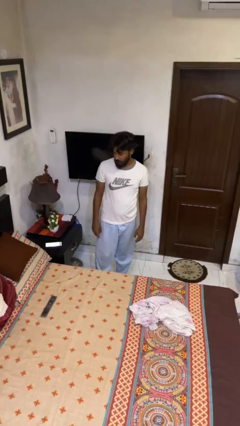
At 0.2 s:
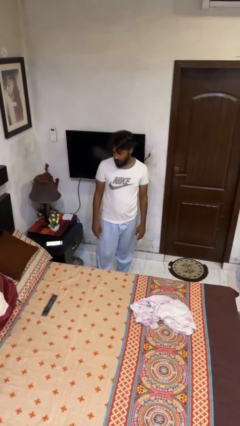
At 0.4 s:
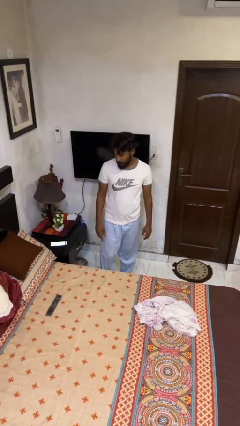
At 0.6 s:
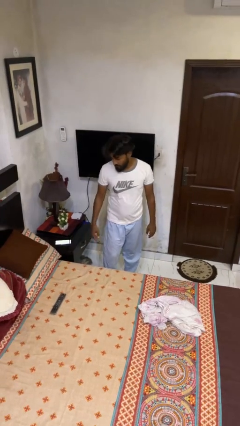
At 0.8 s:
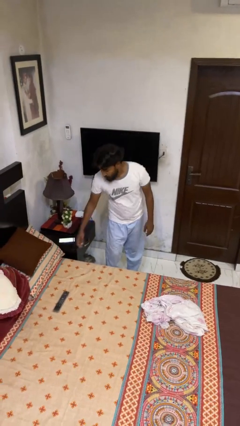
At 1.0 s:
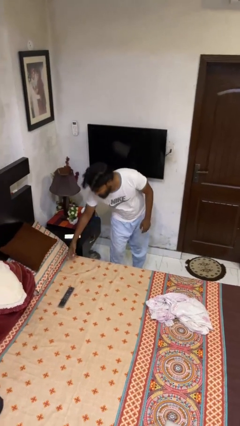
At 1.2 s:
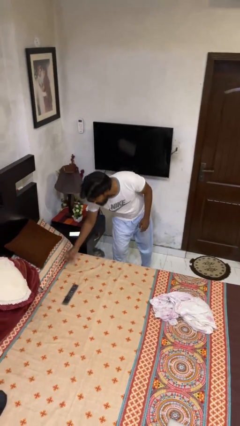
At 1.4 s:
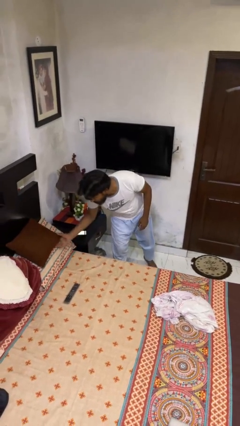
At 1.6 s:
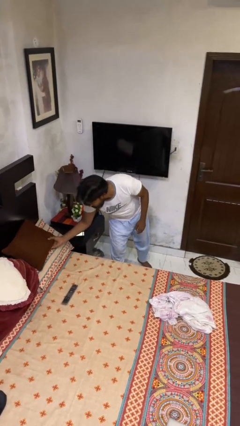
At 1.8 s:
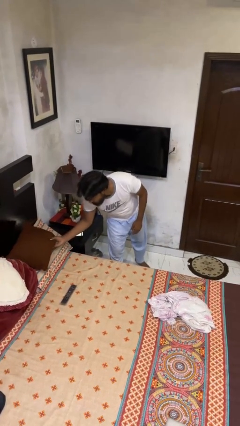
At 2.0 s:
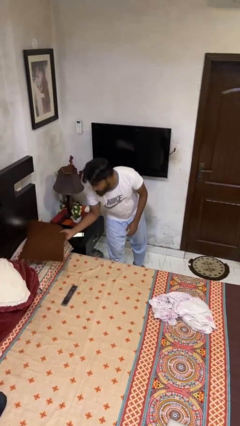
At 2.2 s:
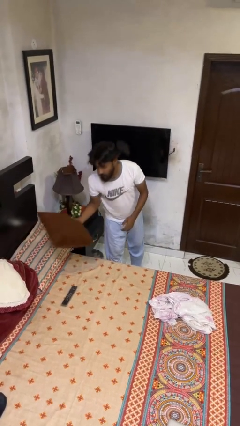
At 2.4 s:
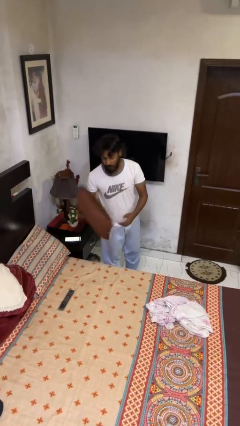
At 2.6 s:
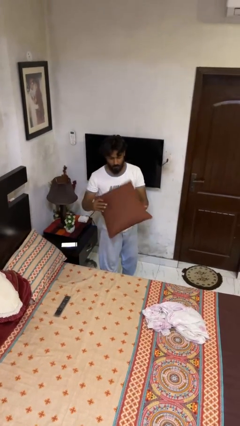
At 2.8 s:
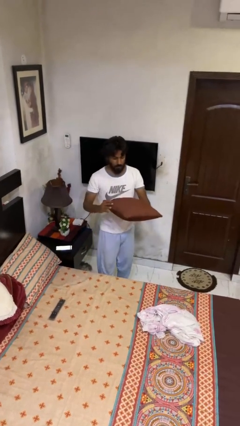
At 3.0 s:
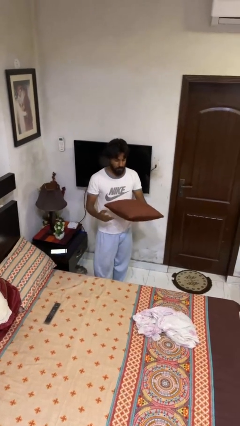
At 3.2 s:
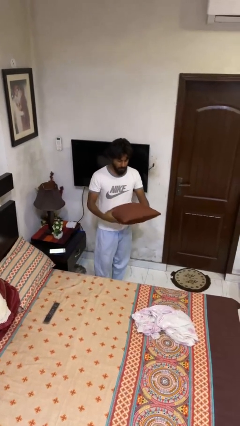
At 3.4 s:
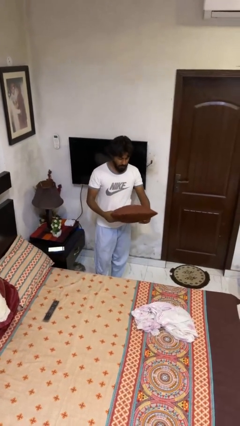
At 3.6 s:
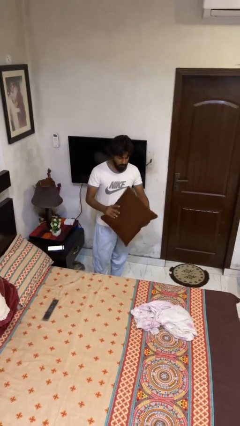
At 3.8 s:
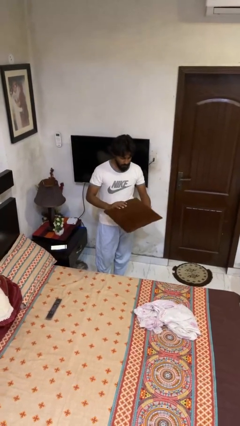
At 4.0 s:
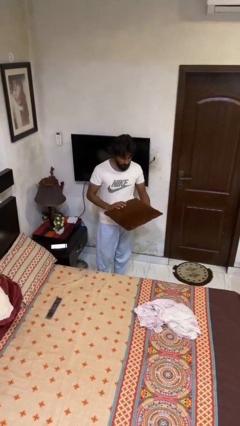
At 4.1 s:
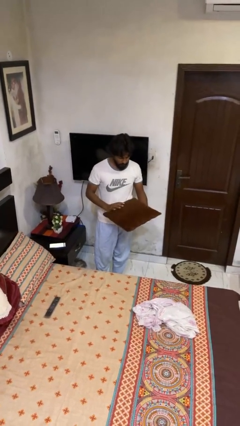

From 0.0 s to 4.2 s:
person picks up object from bed

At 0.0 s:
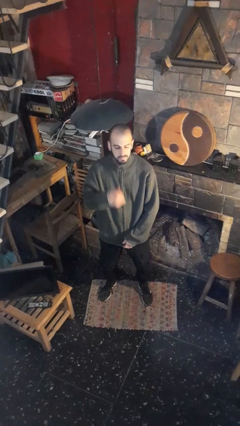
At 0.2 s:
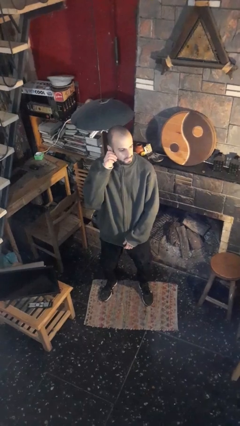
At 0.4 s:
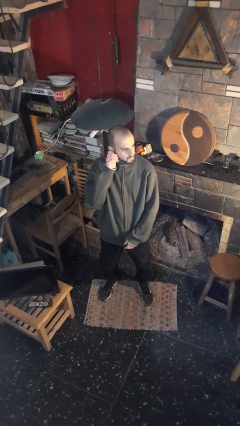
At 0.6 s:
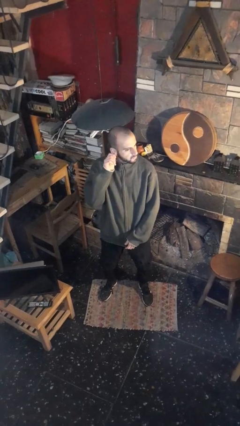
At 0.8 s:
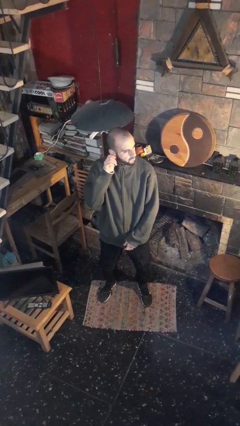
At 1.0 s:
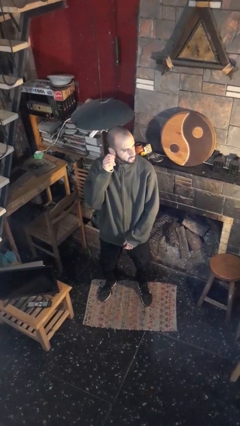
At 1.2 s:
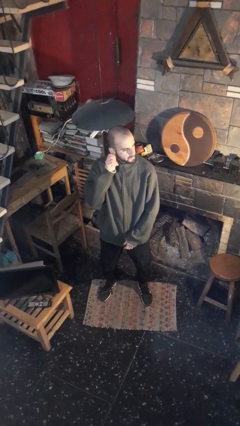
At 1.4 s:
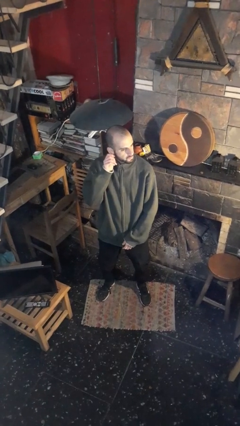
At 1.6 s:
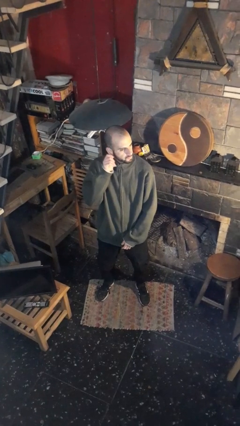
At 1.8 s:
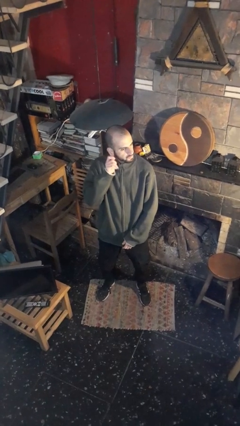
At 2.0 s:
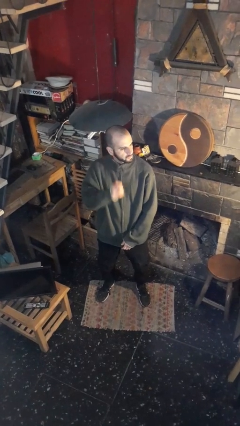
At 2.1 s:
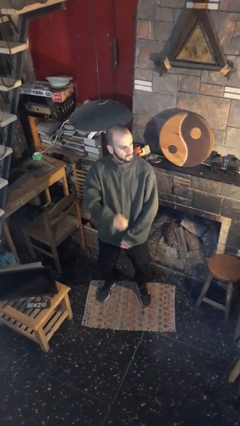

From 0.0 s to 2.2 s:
person touches earlobe

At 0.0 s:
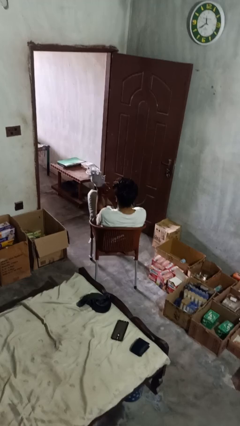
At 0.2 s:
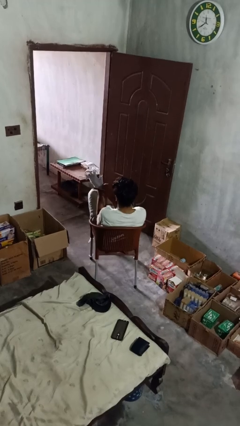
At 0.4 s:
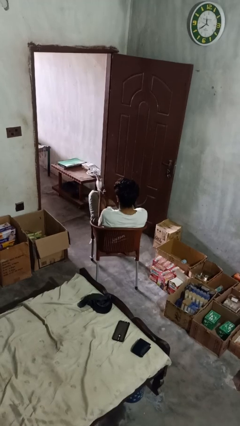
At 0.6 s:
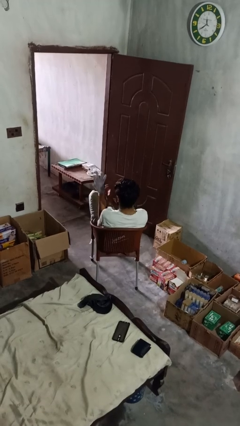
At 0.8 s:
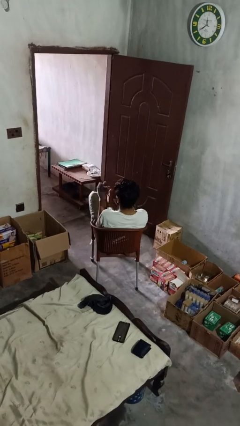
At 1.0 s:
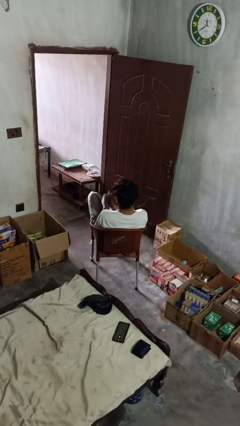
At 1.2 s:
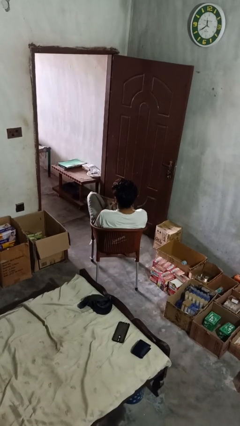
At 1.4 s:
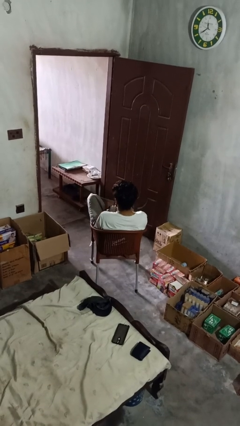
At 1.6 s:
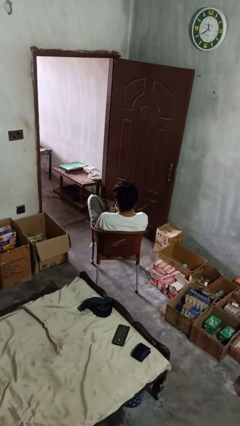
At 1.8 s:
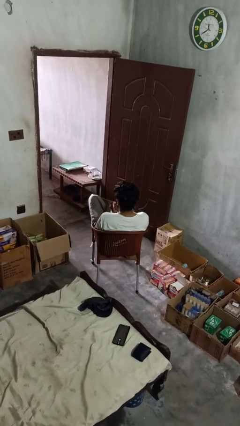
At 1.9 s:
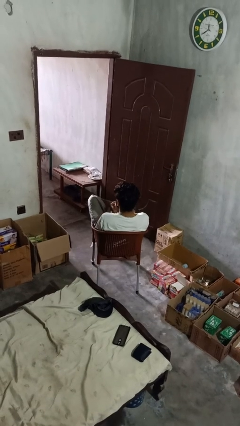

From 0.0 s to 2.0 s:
person takes off gloves

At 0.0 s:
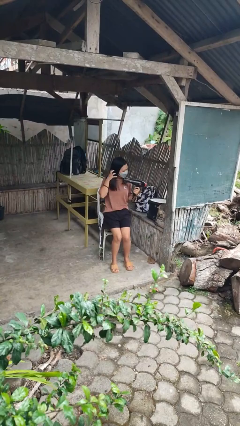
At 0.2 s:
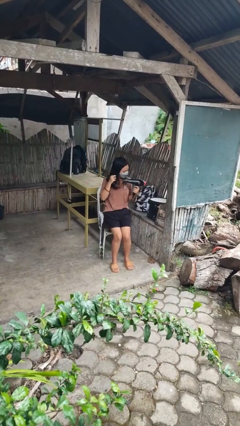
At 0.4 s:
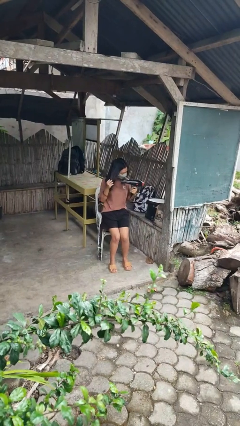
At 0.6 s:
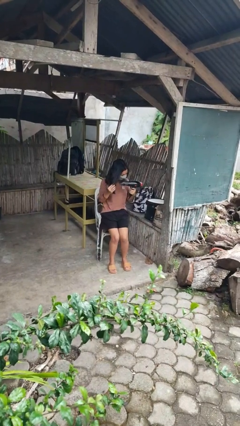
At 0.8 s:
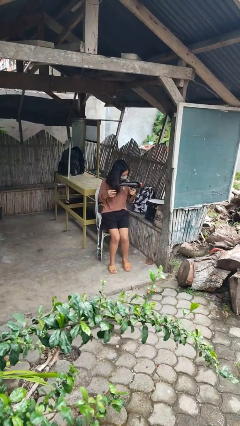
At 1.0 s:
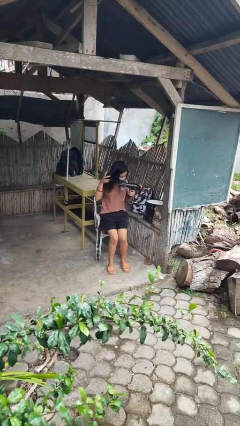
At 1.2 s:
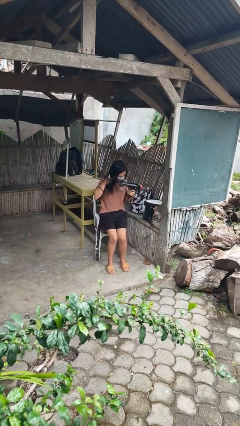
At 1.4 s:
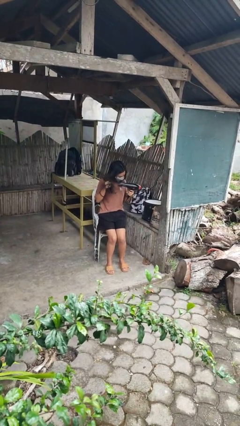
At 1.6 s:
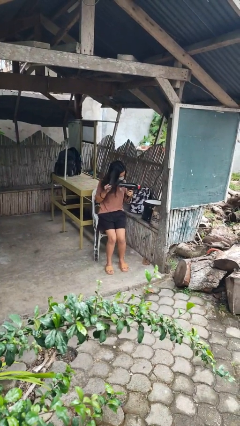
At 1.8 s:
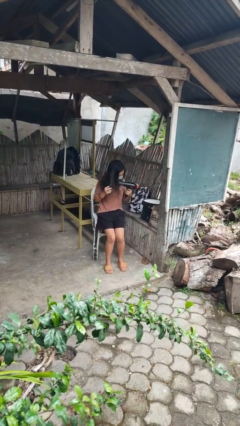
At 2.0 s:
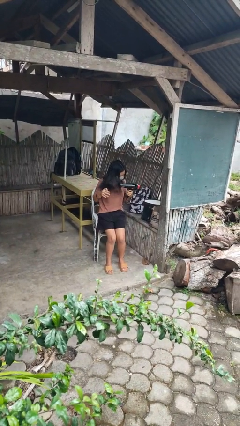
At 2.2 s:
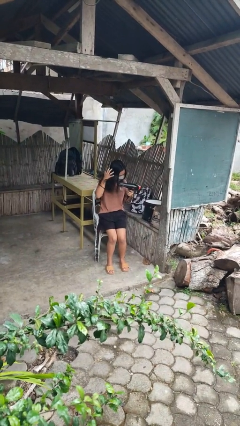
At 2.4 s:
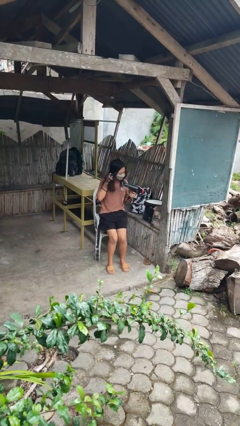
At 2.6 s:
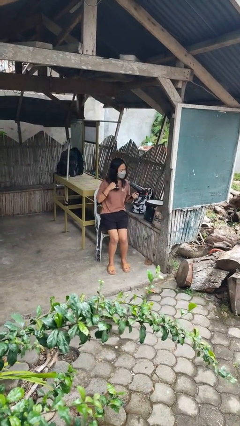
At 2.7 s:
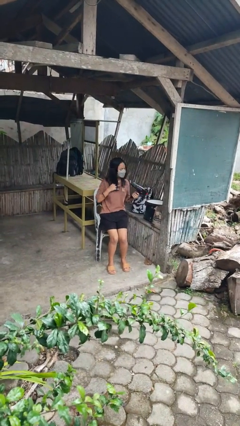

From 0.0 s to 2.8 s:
person dries hair with hairdryer

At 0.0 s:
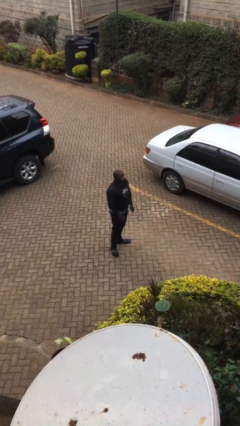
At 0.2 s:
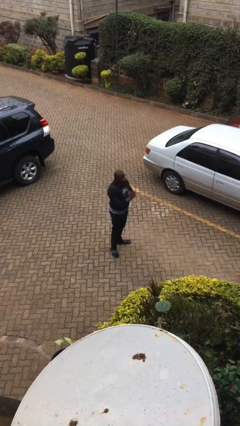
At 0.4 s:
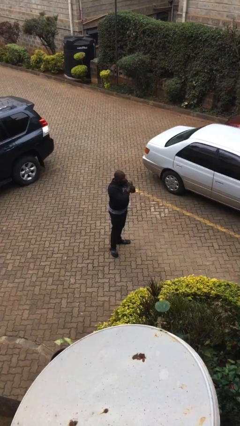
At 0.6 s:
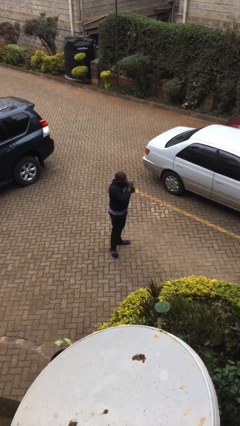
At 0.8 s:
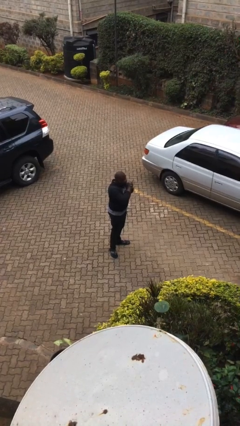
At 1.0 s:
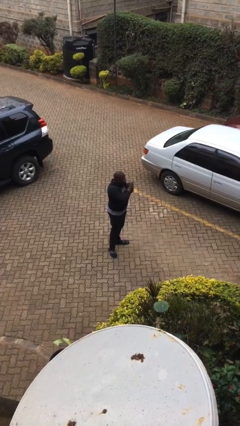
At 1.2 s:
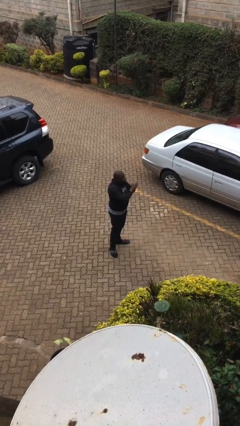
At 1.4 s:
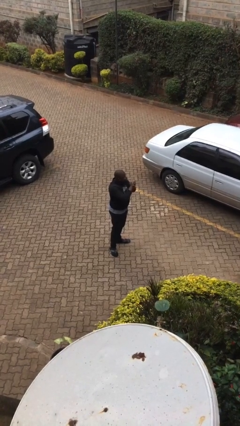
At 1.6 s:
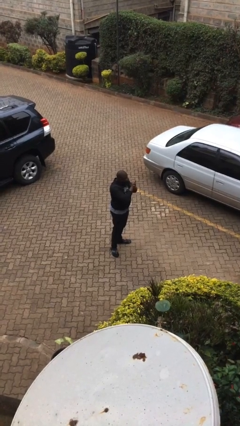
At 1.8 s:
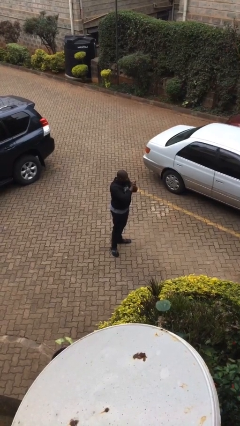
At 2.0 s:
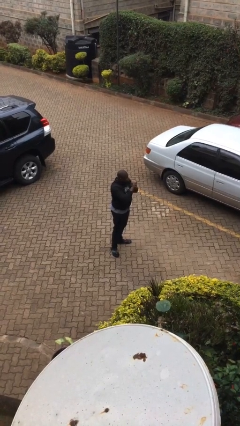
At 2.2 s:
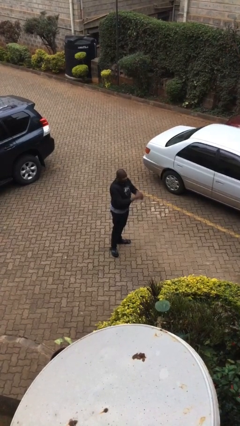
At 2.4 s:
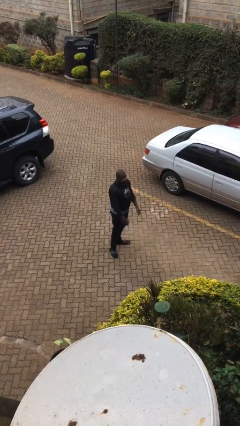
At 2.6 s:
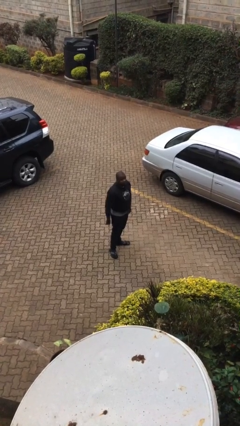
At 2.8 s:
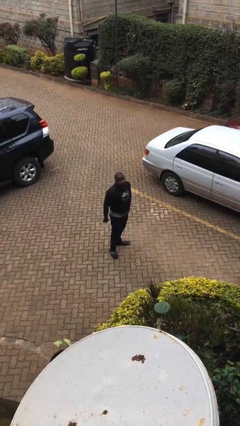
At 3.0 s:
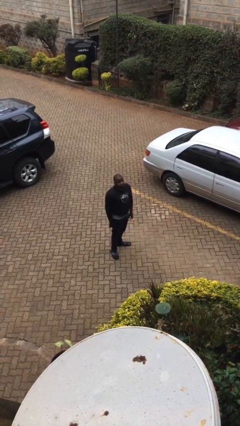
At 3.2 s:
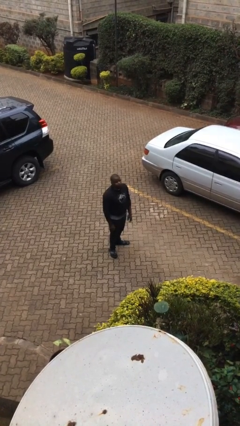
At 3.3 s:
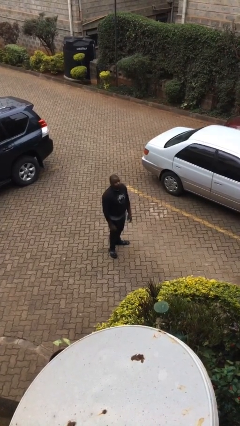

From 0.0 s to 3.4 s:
person blows into hands

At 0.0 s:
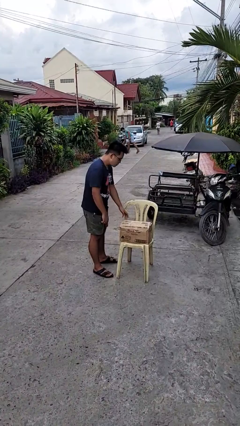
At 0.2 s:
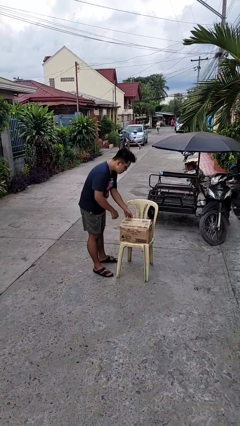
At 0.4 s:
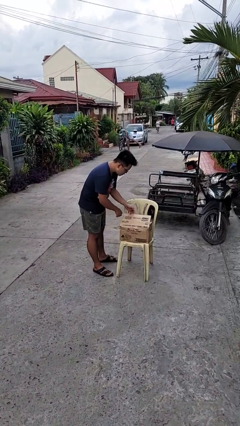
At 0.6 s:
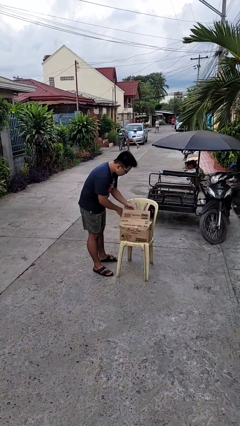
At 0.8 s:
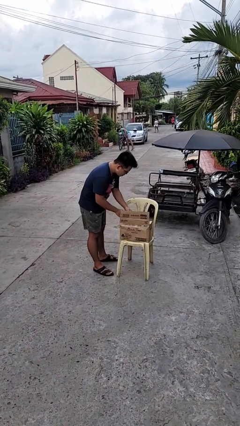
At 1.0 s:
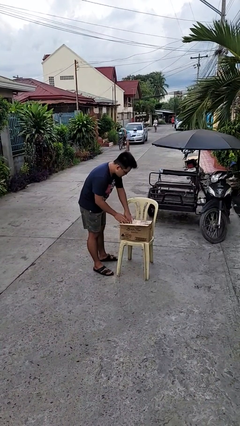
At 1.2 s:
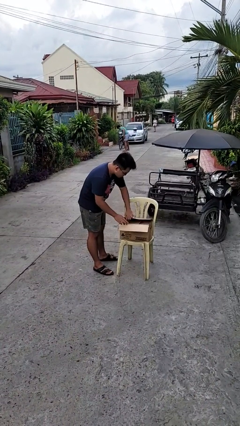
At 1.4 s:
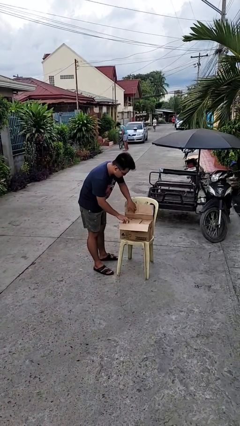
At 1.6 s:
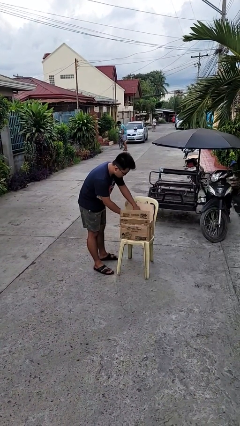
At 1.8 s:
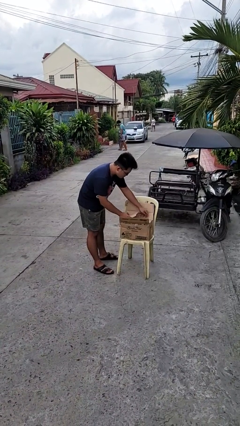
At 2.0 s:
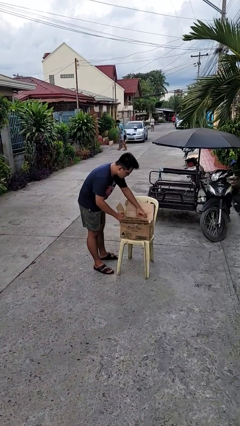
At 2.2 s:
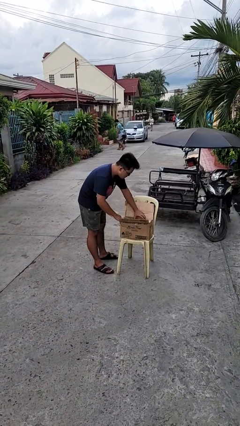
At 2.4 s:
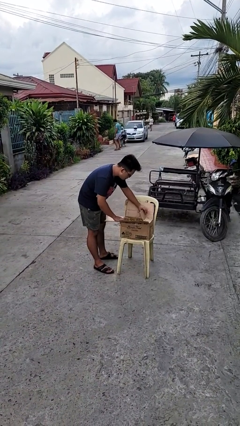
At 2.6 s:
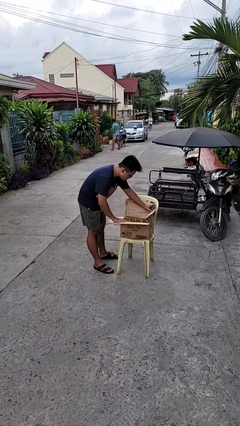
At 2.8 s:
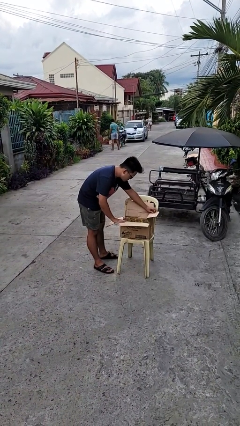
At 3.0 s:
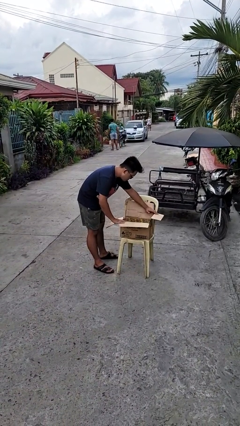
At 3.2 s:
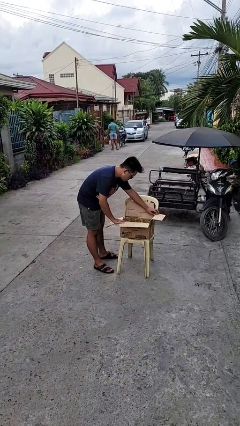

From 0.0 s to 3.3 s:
person opens box
